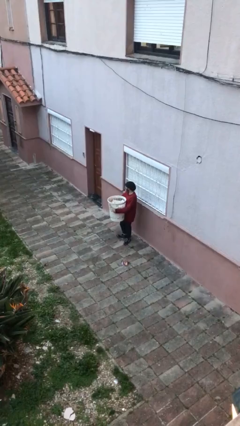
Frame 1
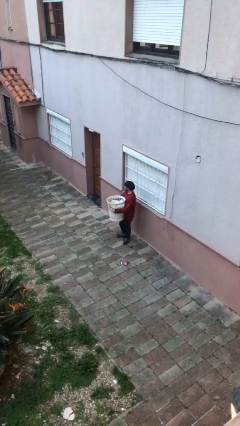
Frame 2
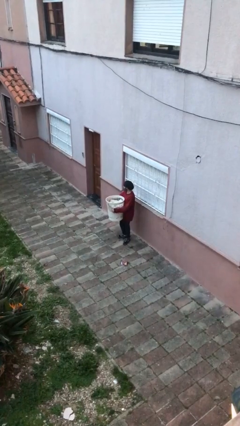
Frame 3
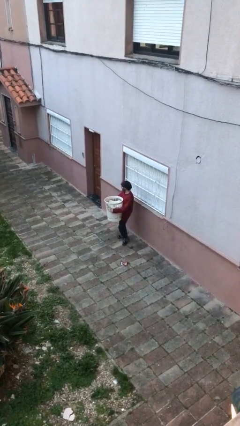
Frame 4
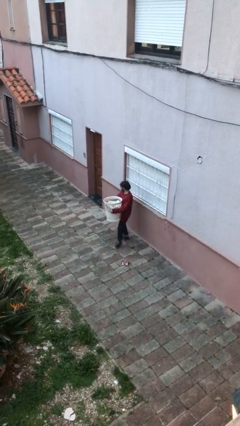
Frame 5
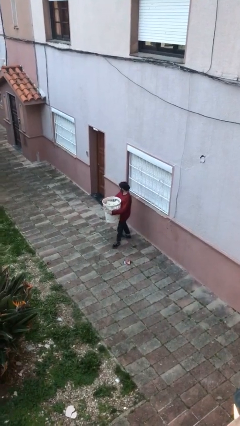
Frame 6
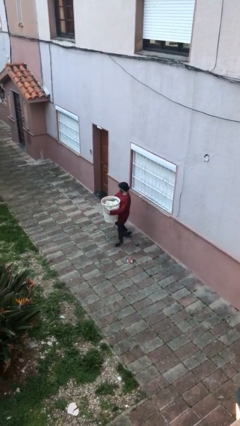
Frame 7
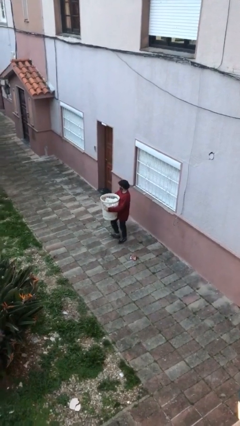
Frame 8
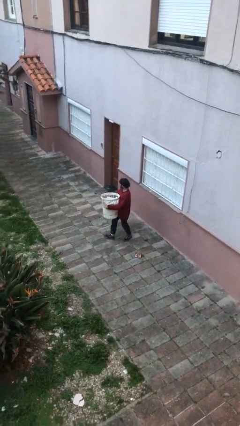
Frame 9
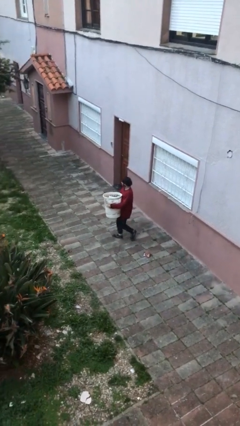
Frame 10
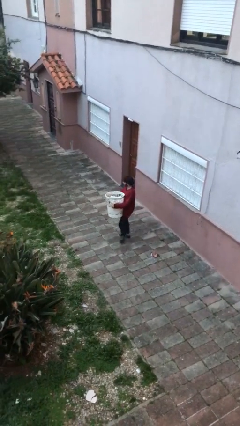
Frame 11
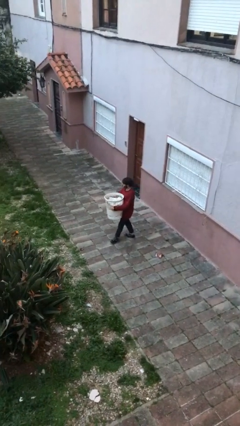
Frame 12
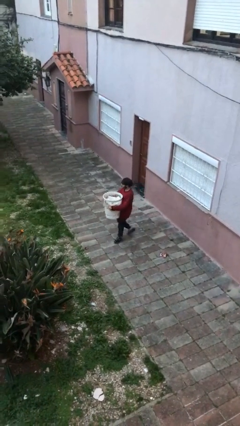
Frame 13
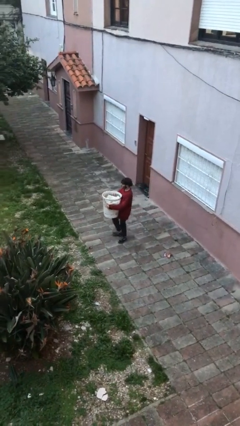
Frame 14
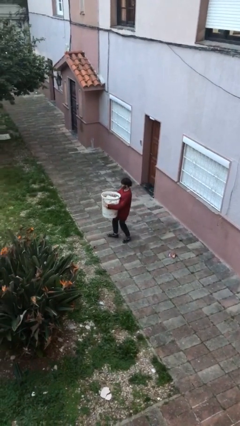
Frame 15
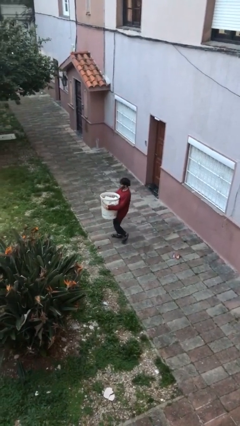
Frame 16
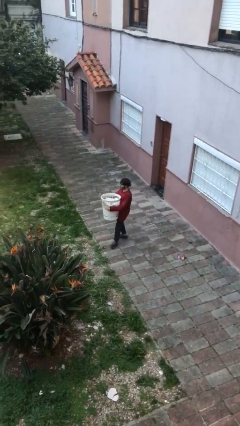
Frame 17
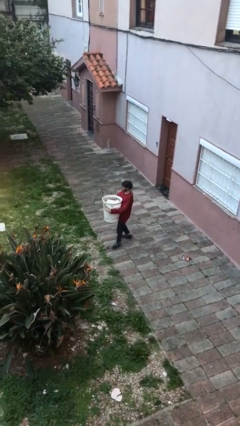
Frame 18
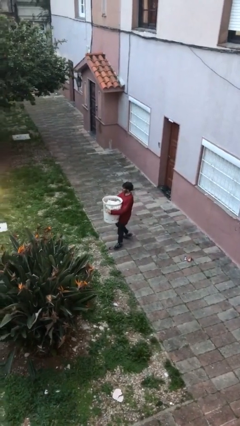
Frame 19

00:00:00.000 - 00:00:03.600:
person carries laundry basket

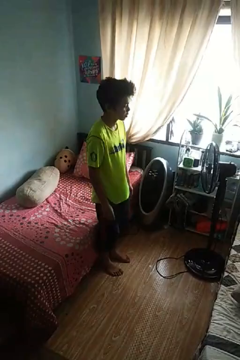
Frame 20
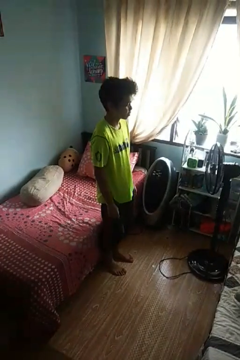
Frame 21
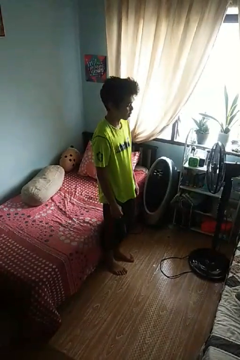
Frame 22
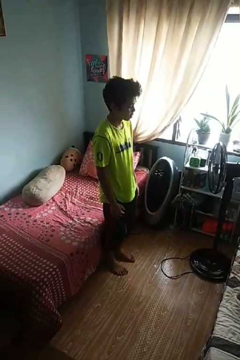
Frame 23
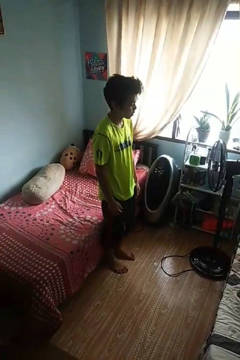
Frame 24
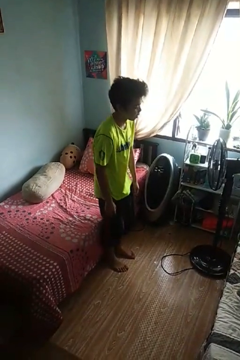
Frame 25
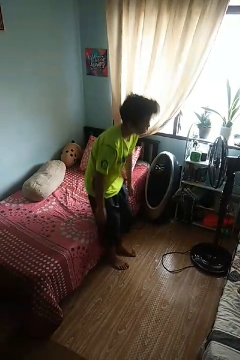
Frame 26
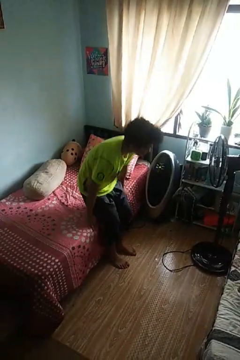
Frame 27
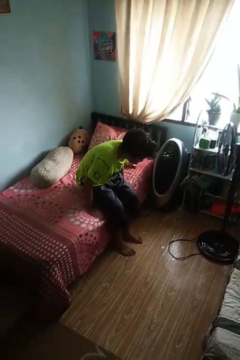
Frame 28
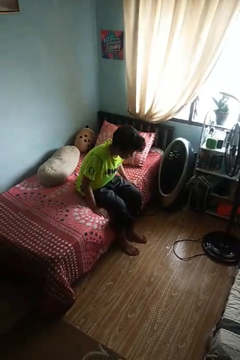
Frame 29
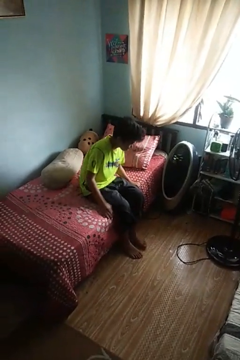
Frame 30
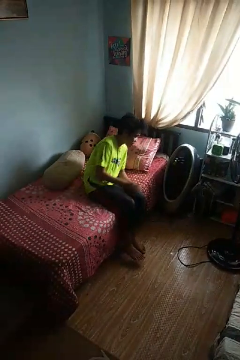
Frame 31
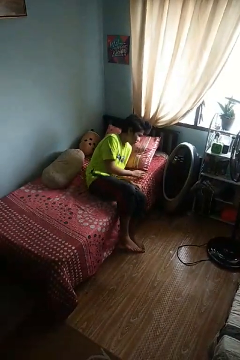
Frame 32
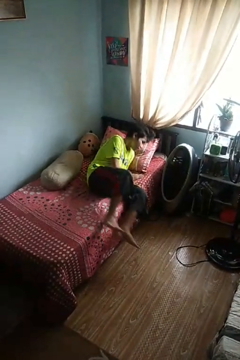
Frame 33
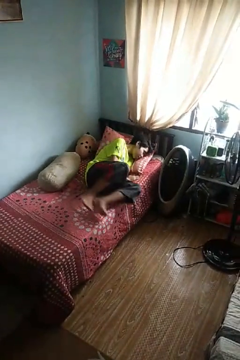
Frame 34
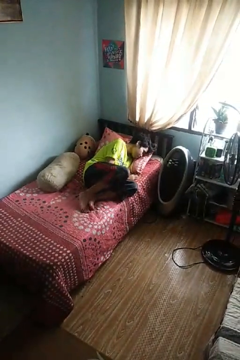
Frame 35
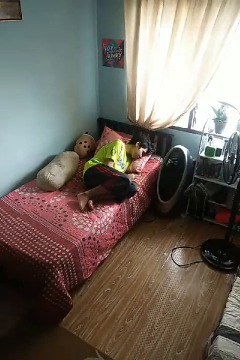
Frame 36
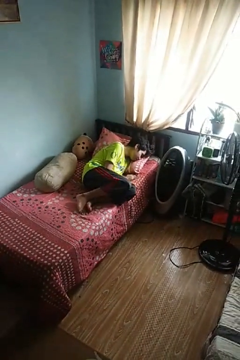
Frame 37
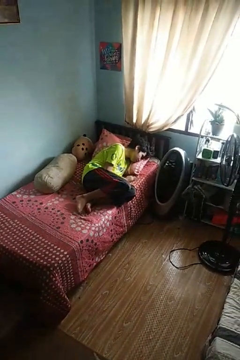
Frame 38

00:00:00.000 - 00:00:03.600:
person lies down on bed

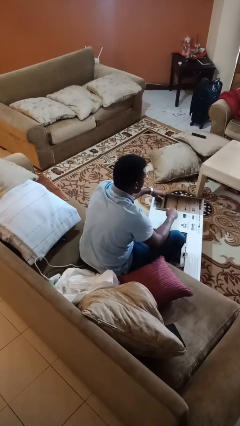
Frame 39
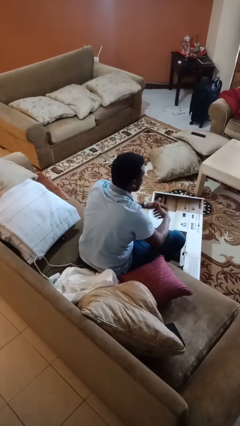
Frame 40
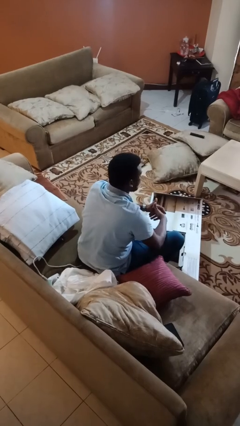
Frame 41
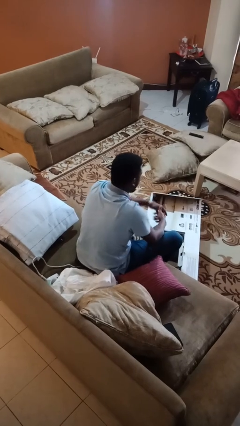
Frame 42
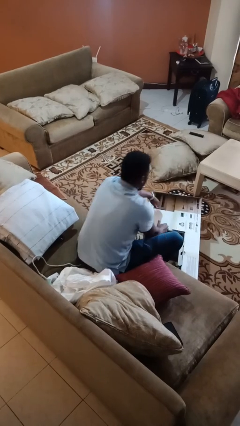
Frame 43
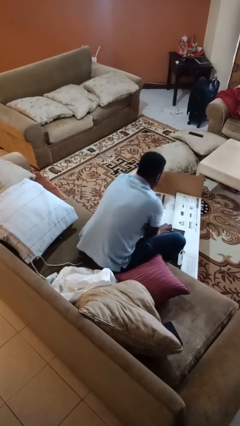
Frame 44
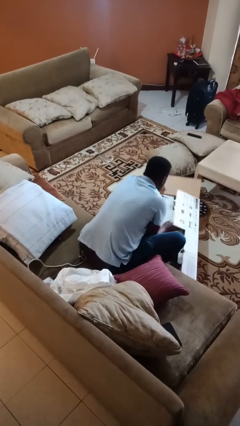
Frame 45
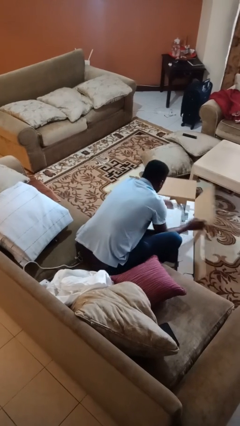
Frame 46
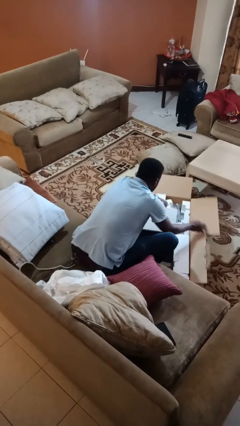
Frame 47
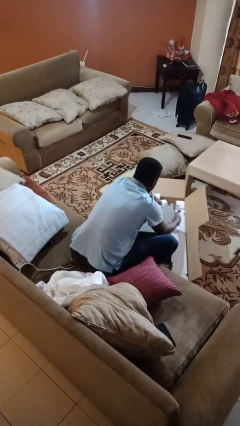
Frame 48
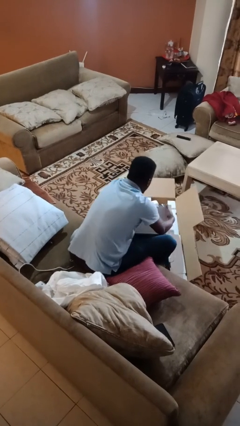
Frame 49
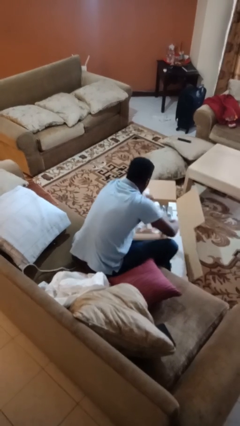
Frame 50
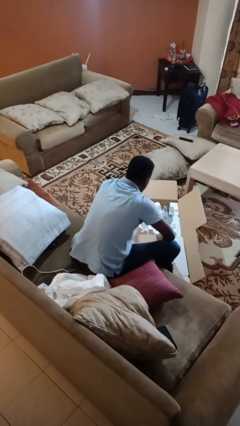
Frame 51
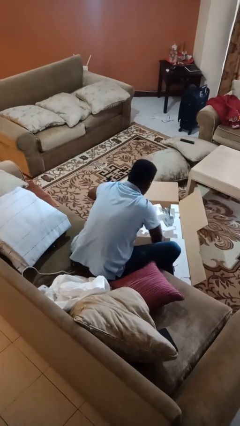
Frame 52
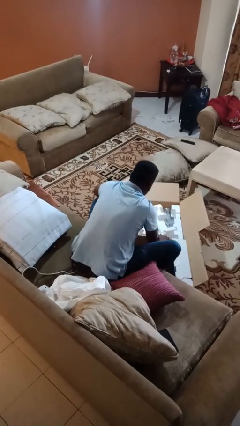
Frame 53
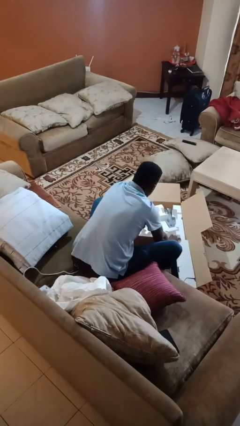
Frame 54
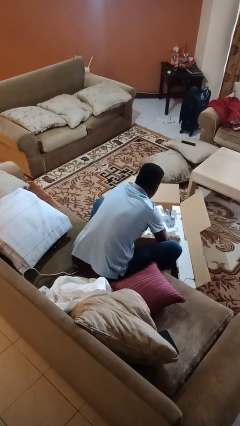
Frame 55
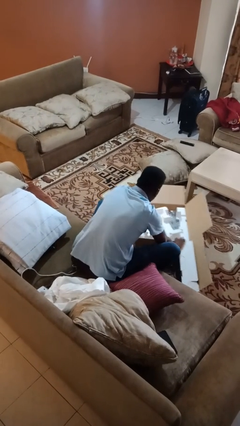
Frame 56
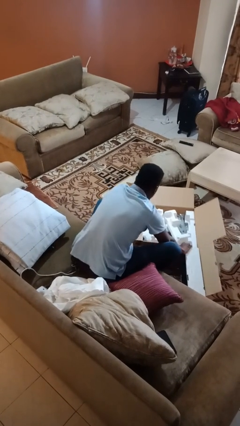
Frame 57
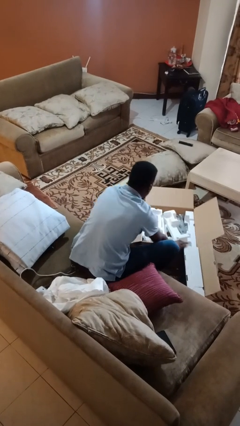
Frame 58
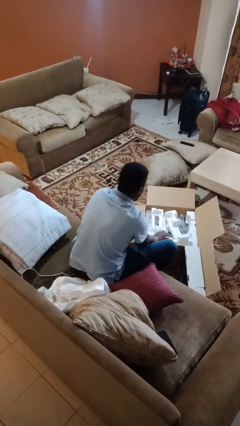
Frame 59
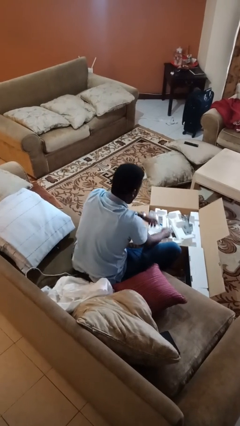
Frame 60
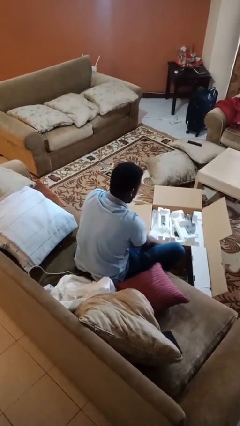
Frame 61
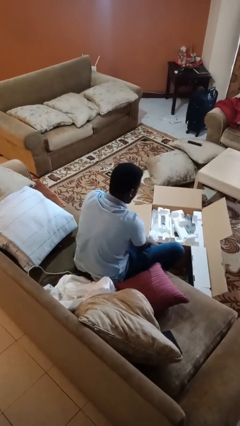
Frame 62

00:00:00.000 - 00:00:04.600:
person opens box

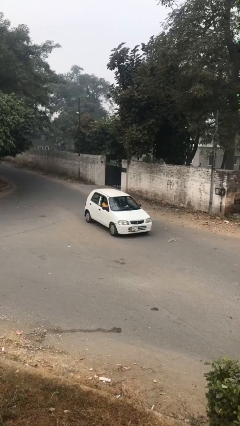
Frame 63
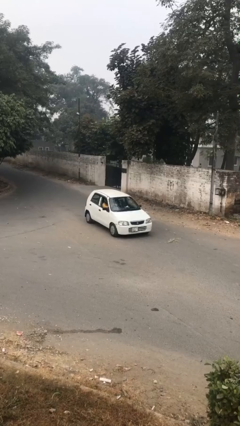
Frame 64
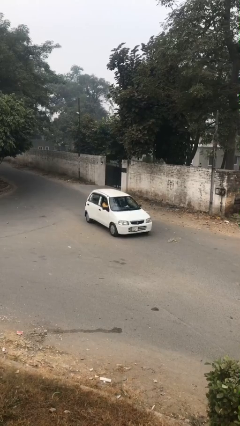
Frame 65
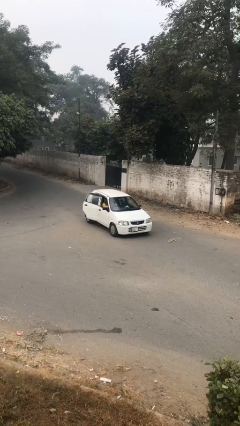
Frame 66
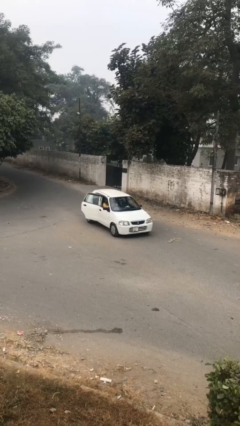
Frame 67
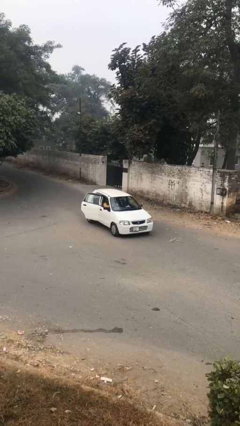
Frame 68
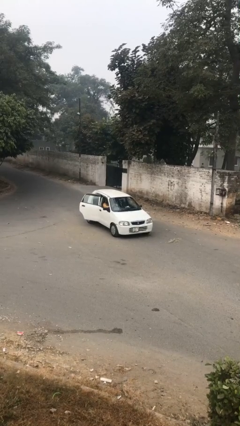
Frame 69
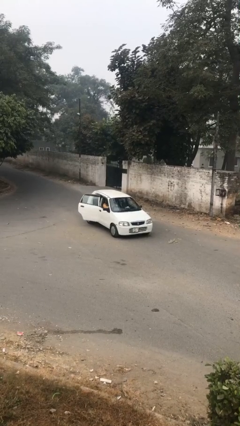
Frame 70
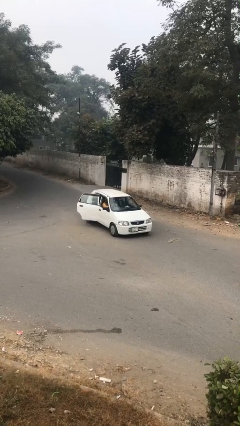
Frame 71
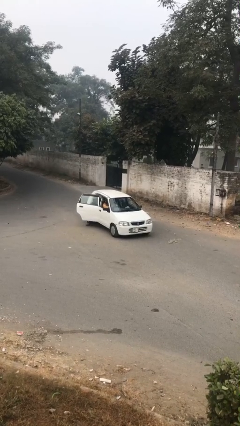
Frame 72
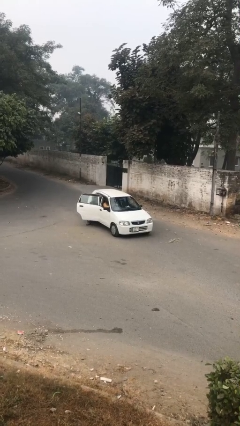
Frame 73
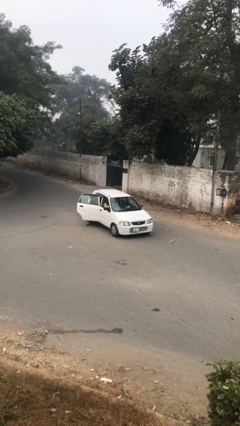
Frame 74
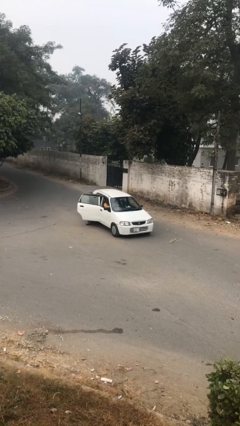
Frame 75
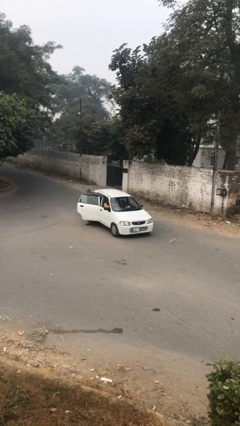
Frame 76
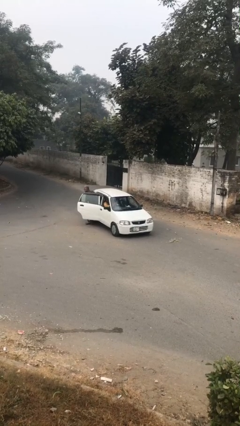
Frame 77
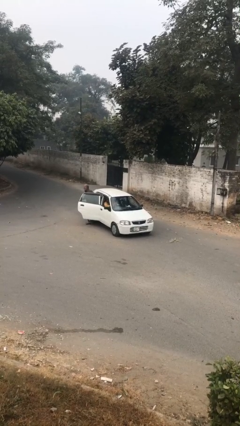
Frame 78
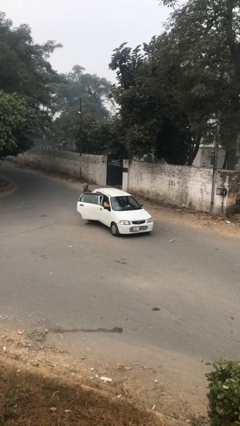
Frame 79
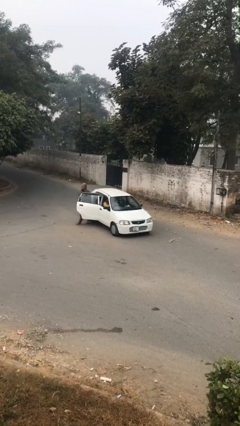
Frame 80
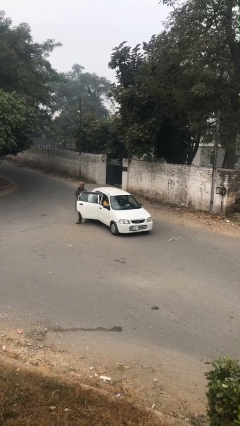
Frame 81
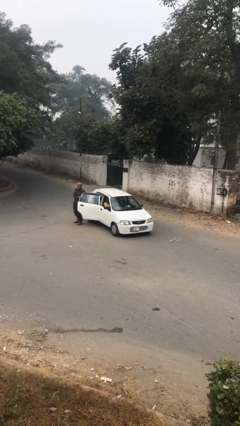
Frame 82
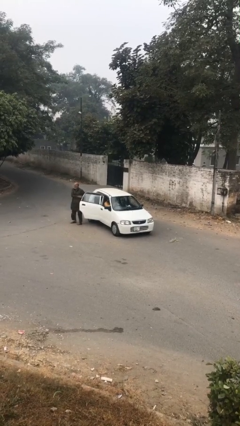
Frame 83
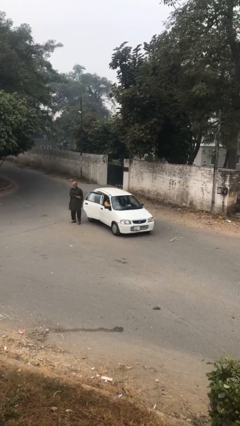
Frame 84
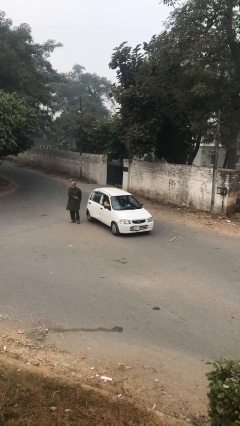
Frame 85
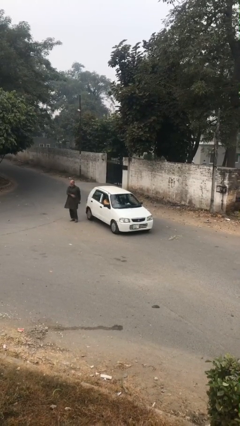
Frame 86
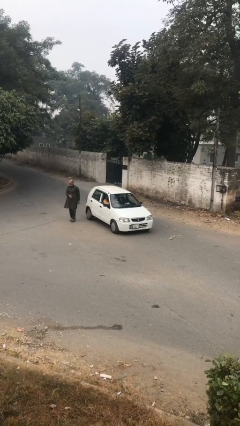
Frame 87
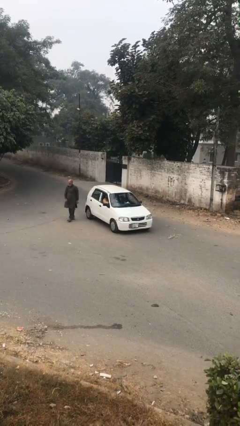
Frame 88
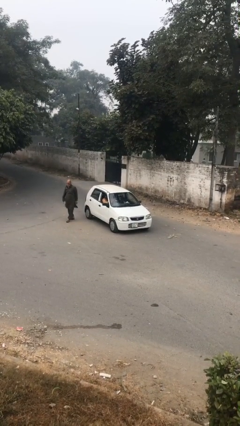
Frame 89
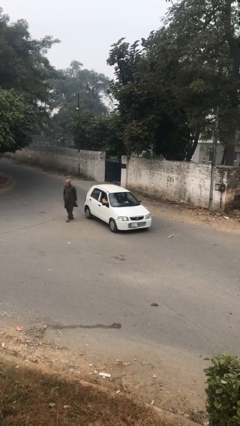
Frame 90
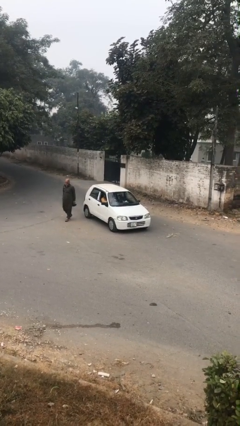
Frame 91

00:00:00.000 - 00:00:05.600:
car drops off person

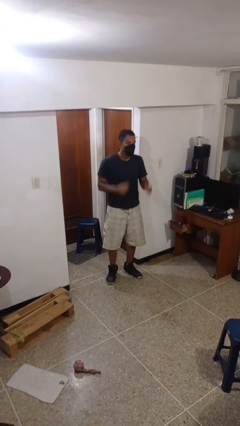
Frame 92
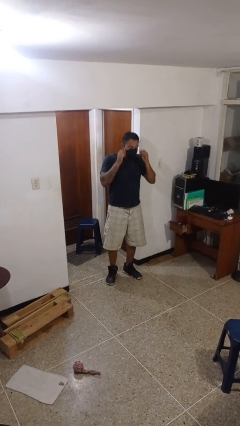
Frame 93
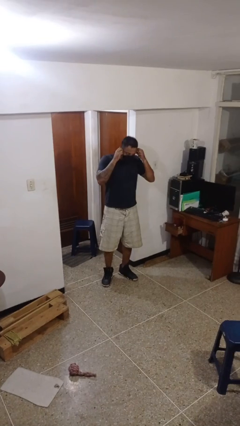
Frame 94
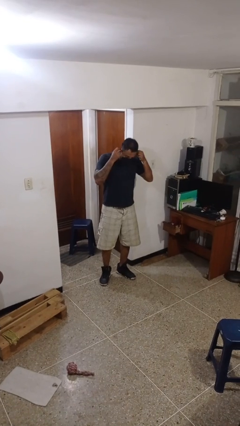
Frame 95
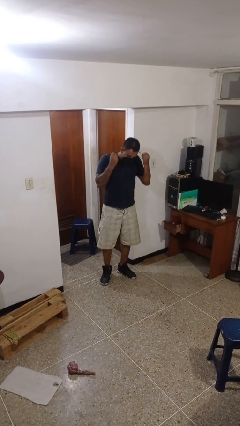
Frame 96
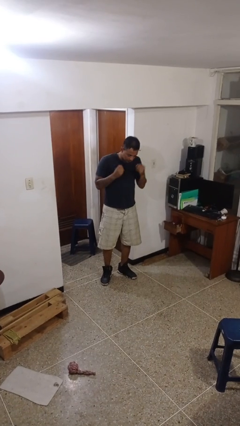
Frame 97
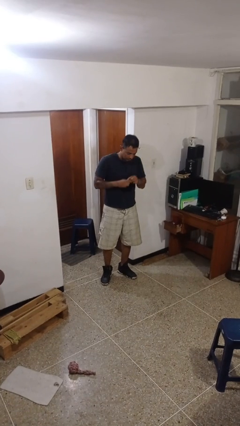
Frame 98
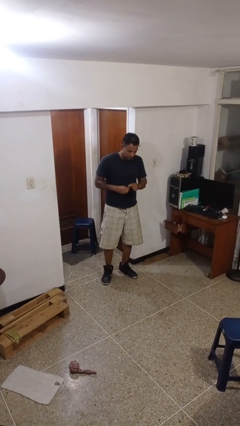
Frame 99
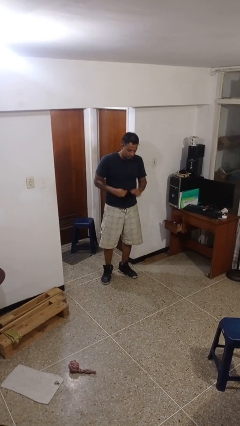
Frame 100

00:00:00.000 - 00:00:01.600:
person takes off facemask
